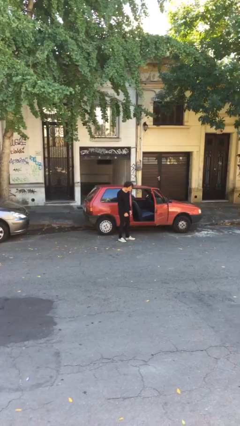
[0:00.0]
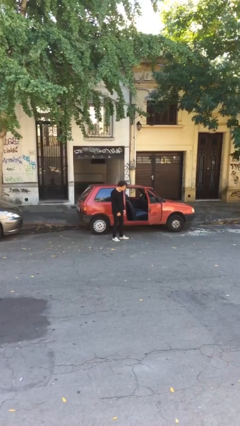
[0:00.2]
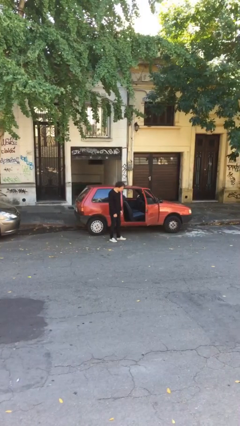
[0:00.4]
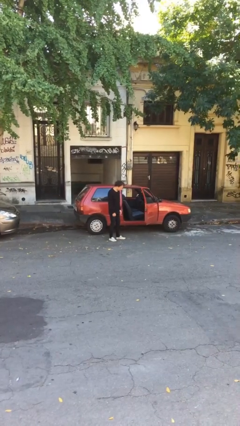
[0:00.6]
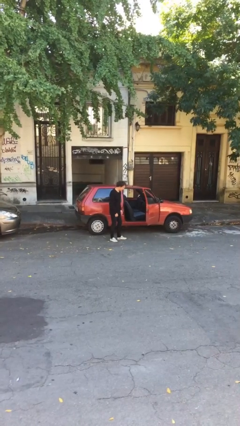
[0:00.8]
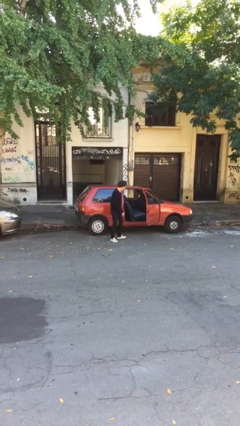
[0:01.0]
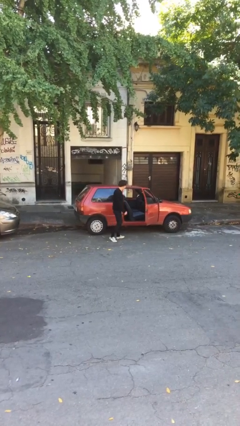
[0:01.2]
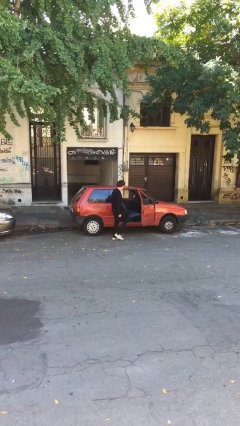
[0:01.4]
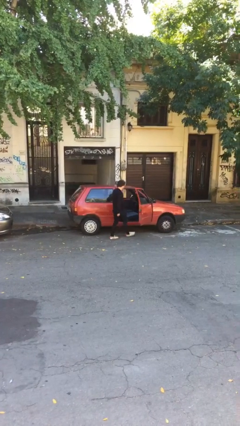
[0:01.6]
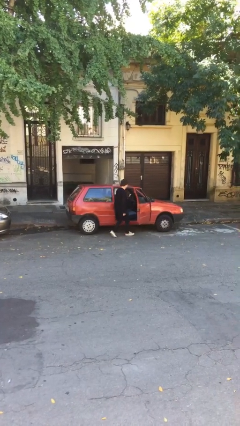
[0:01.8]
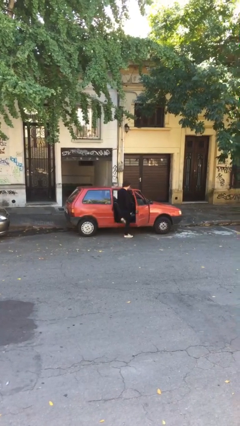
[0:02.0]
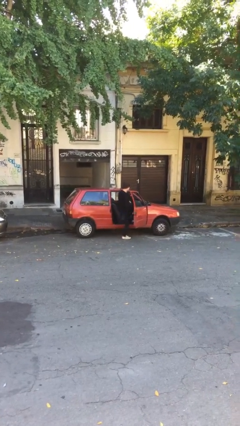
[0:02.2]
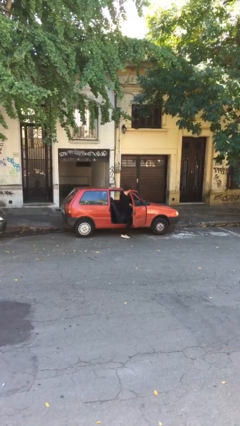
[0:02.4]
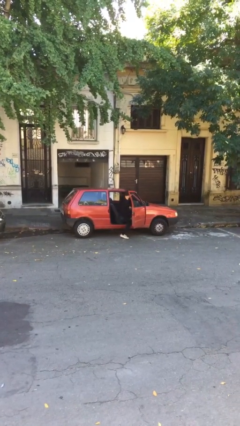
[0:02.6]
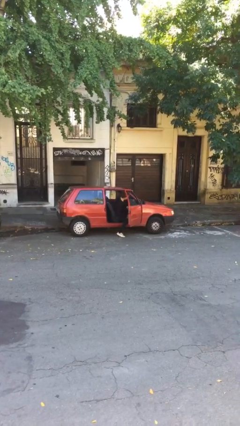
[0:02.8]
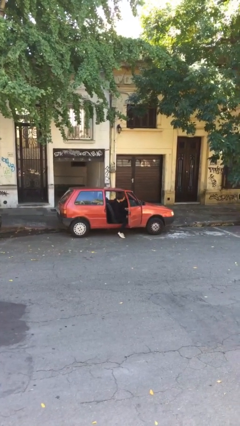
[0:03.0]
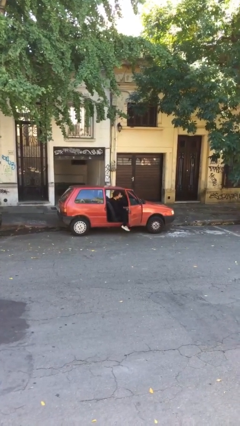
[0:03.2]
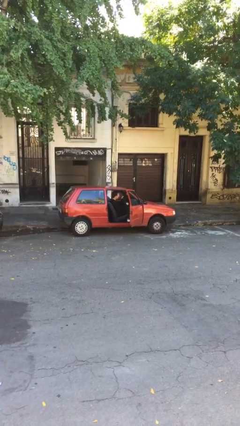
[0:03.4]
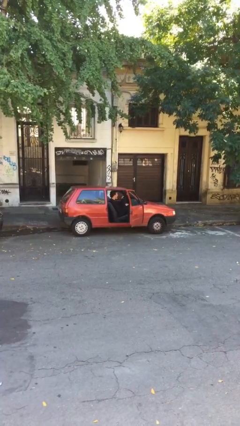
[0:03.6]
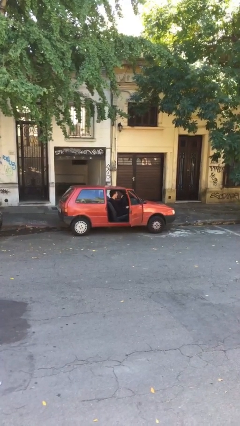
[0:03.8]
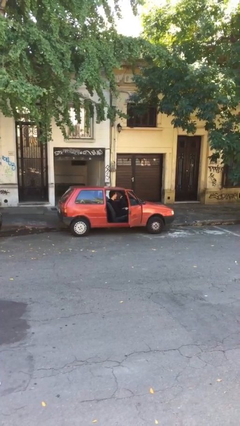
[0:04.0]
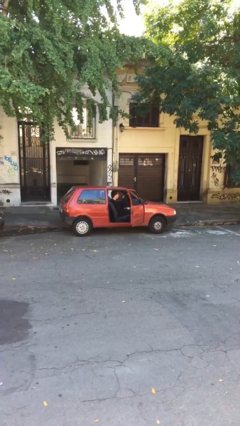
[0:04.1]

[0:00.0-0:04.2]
person enters car

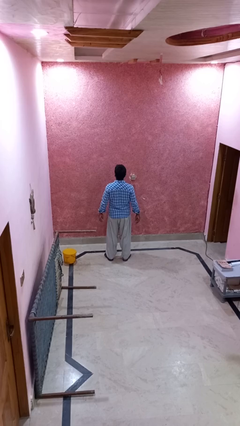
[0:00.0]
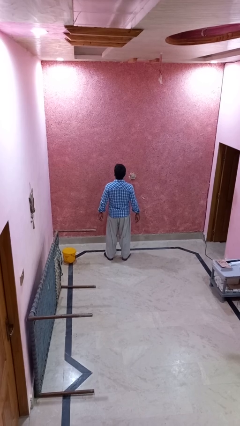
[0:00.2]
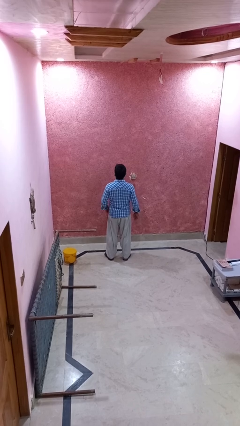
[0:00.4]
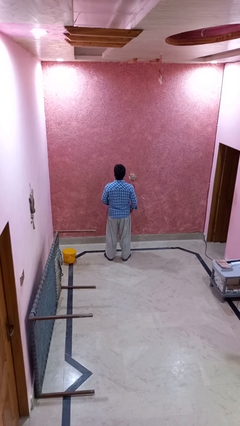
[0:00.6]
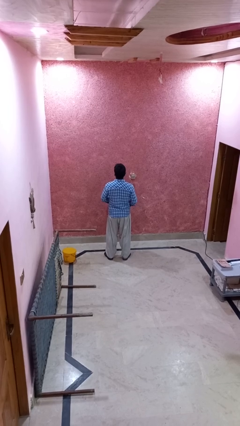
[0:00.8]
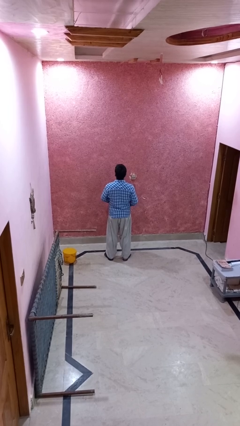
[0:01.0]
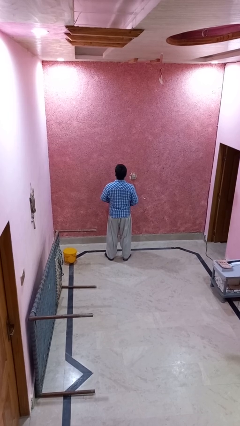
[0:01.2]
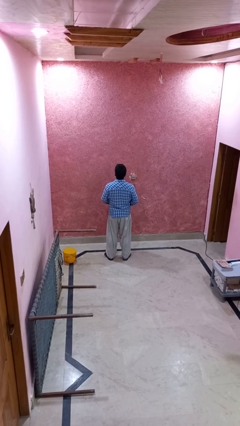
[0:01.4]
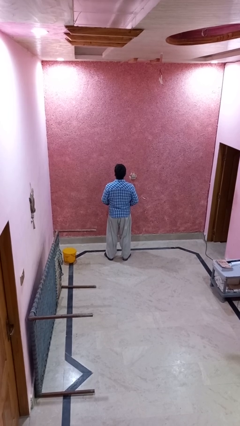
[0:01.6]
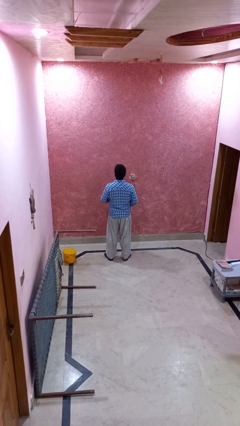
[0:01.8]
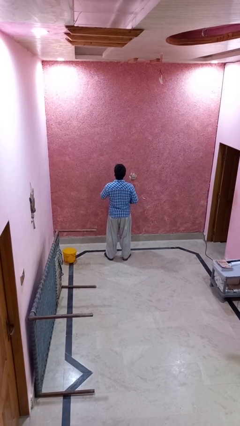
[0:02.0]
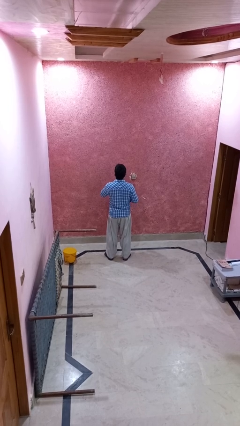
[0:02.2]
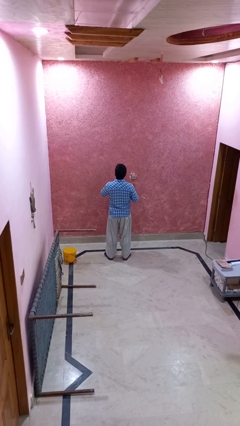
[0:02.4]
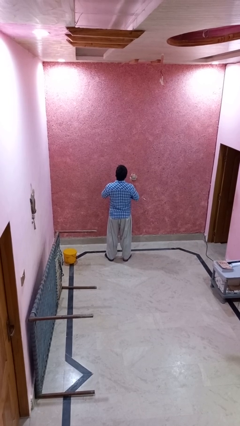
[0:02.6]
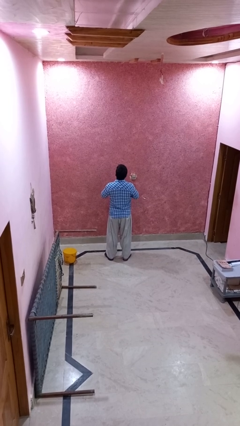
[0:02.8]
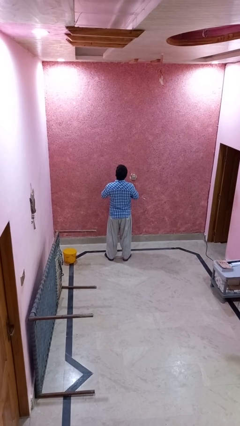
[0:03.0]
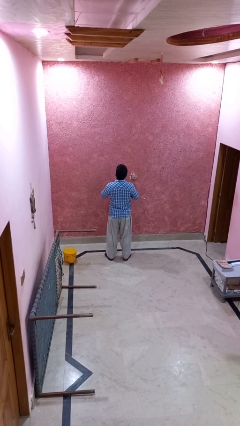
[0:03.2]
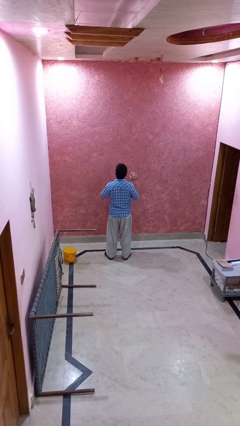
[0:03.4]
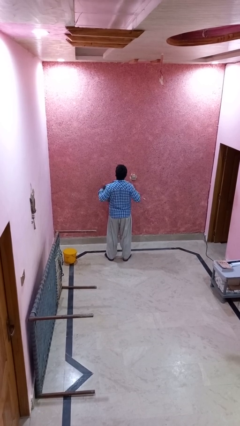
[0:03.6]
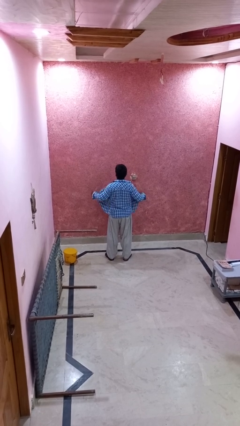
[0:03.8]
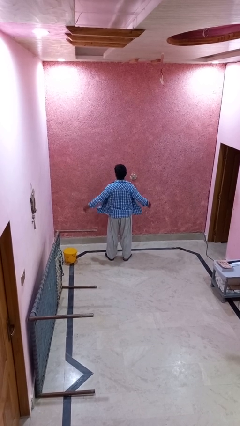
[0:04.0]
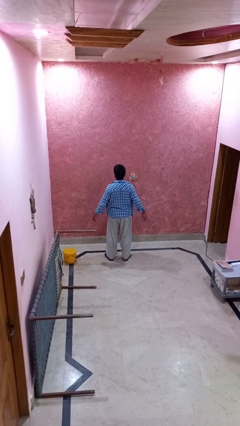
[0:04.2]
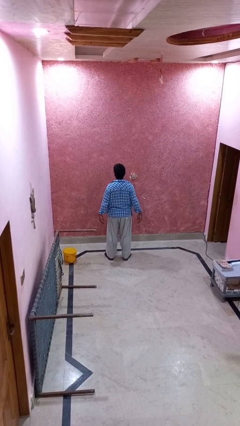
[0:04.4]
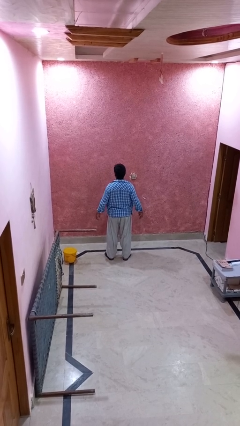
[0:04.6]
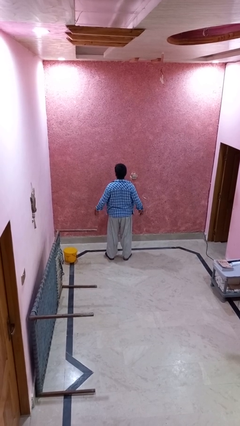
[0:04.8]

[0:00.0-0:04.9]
person unbuttons shirt

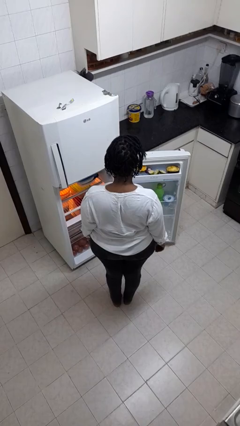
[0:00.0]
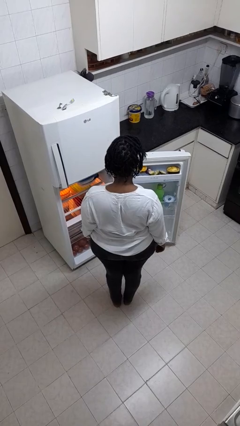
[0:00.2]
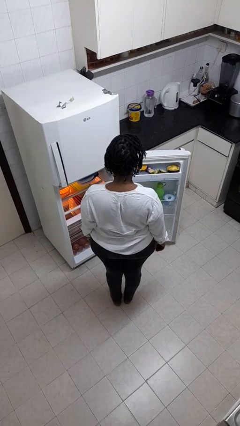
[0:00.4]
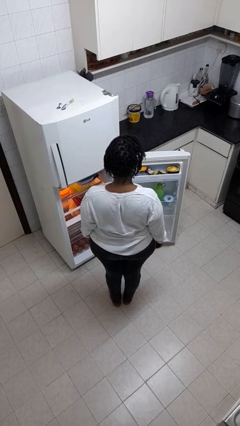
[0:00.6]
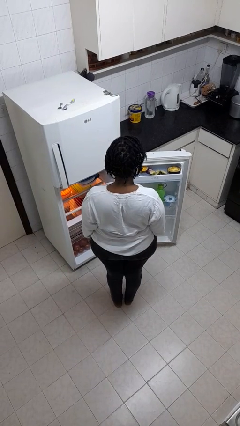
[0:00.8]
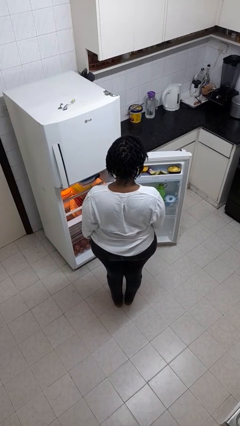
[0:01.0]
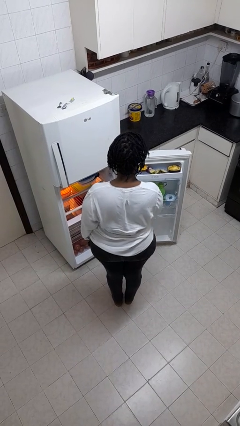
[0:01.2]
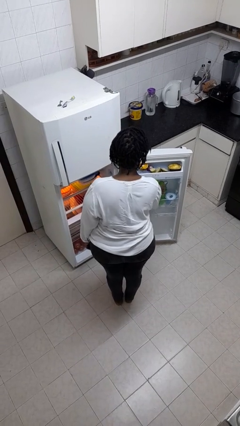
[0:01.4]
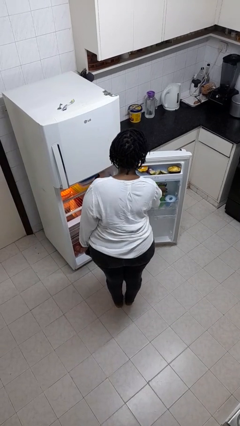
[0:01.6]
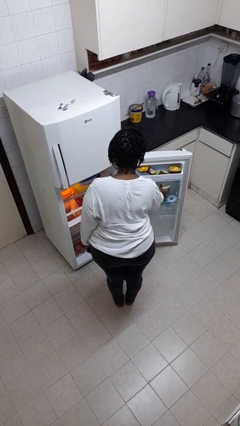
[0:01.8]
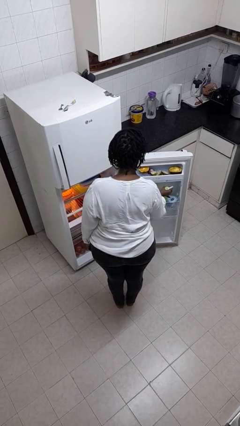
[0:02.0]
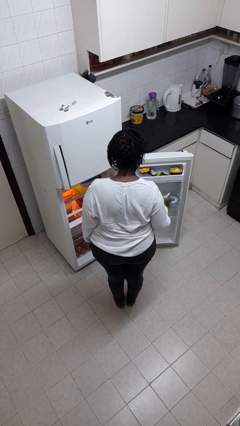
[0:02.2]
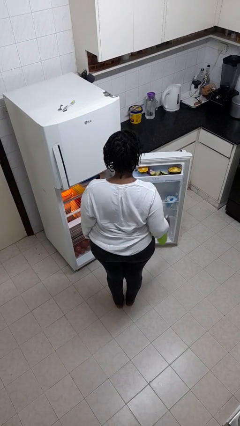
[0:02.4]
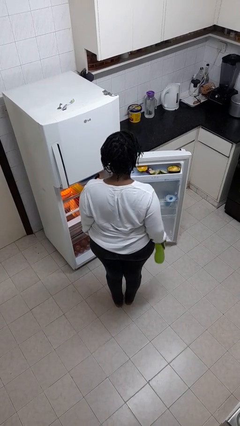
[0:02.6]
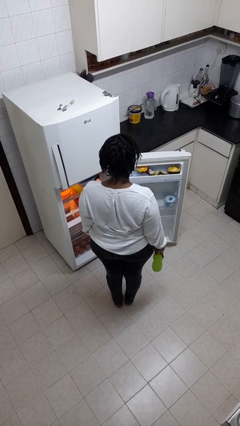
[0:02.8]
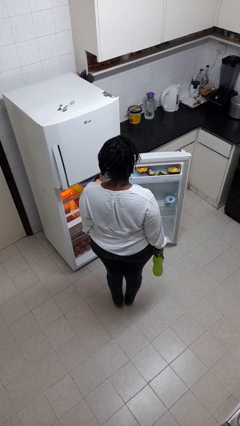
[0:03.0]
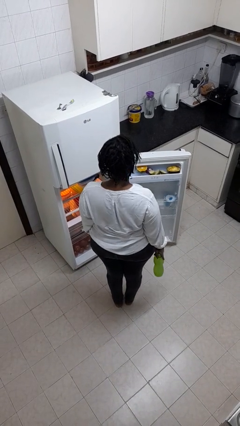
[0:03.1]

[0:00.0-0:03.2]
person takes object from refrigerator

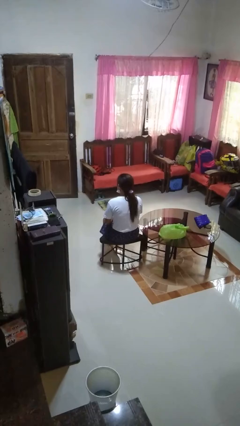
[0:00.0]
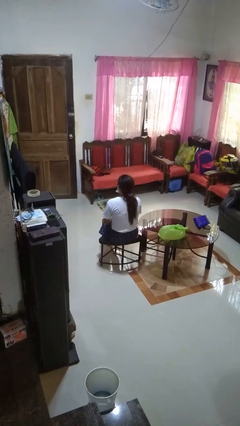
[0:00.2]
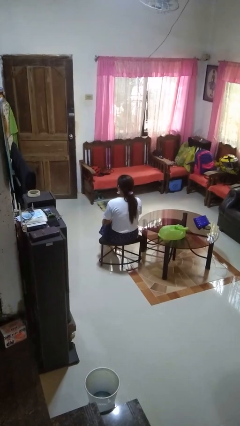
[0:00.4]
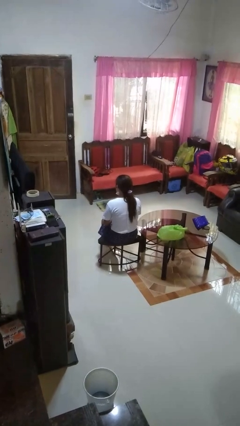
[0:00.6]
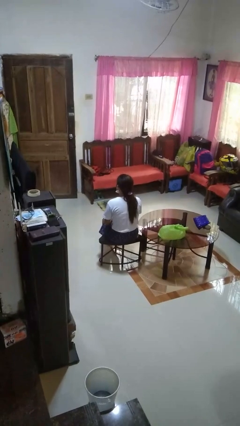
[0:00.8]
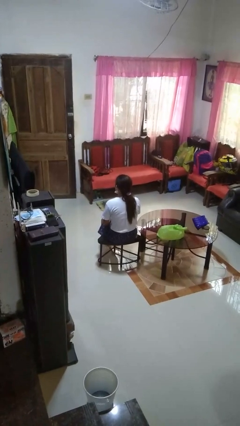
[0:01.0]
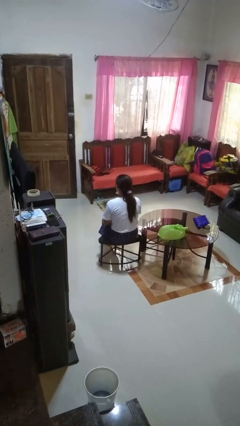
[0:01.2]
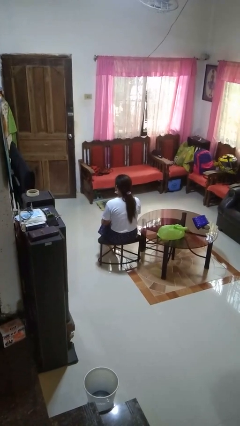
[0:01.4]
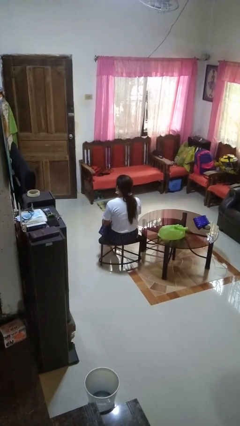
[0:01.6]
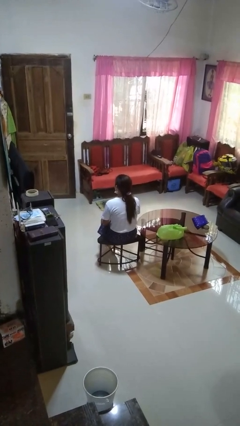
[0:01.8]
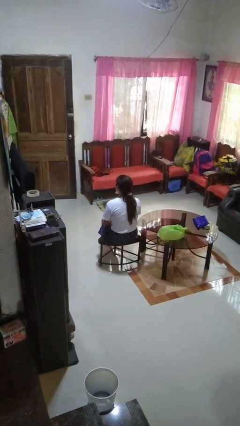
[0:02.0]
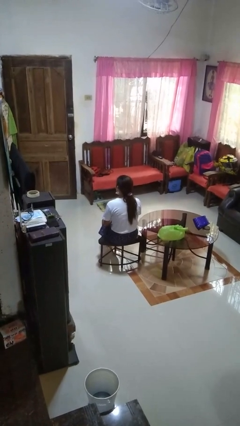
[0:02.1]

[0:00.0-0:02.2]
person nods head

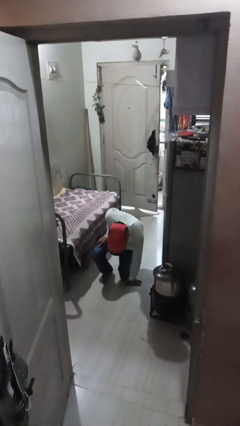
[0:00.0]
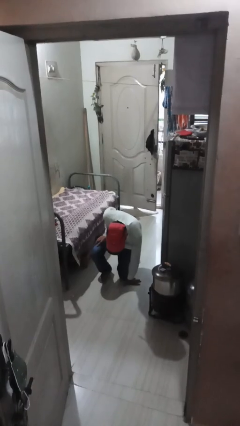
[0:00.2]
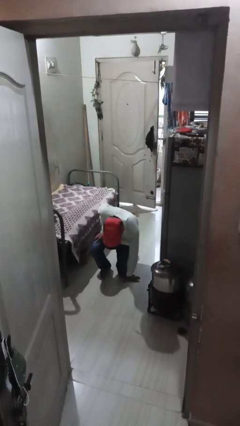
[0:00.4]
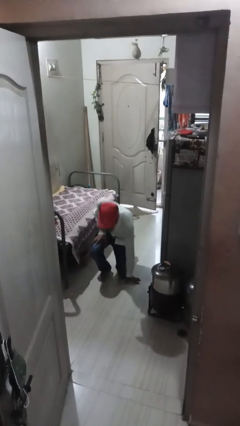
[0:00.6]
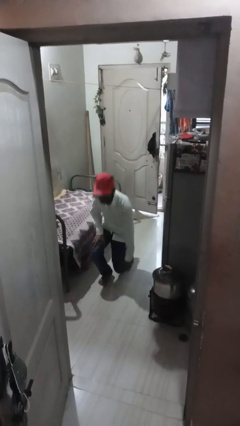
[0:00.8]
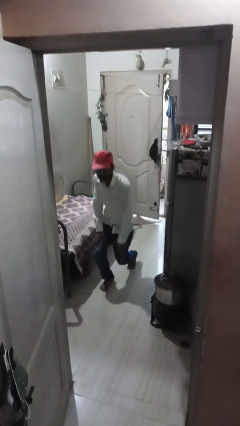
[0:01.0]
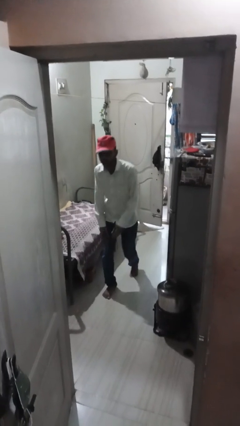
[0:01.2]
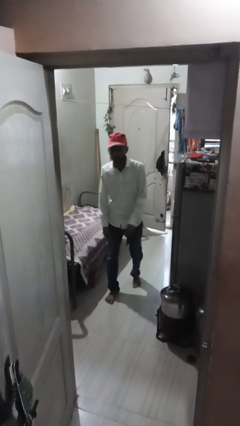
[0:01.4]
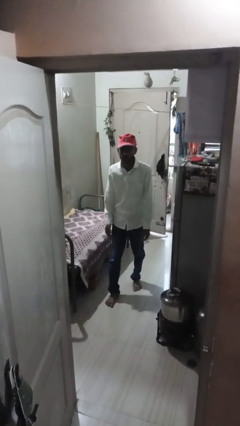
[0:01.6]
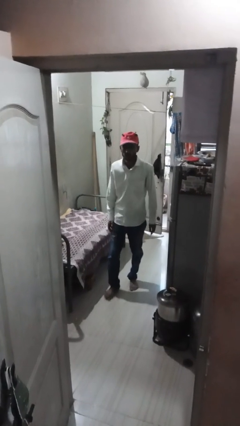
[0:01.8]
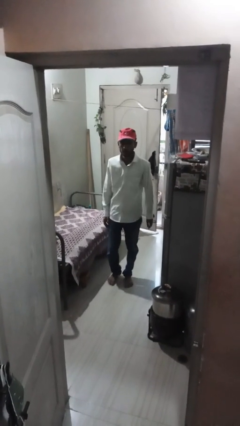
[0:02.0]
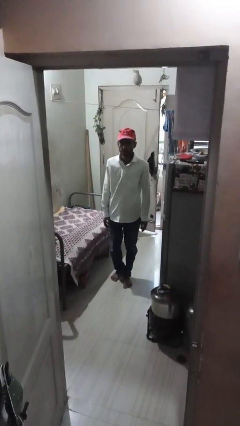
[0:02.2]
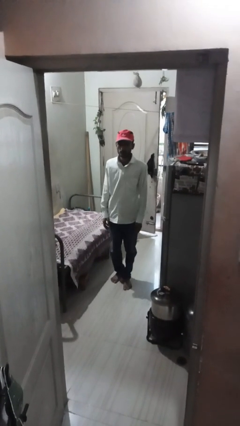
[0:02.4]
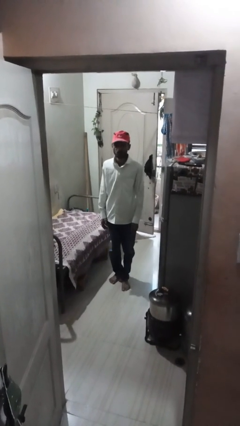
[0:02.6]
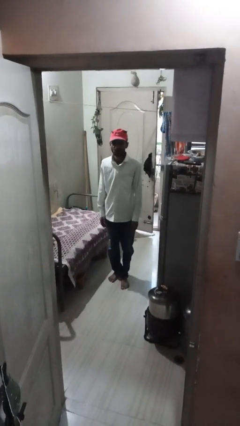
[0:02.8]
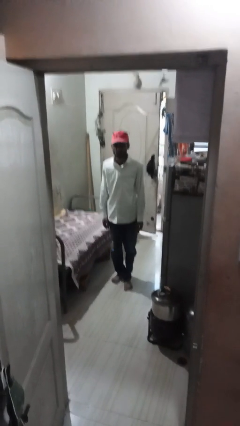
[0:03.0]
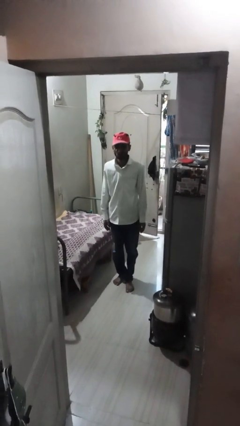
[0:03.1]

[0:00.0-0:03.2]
person stands up from floor

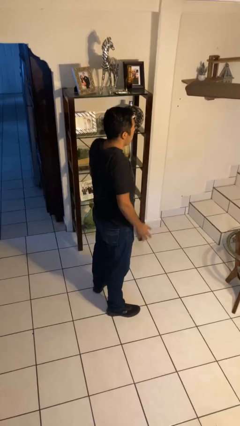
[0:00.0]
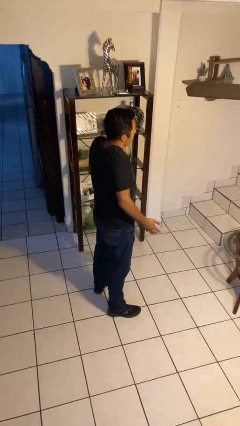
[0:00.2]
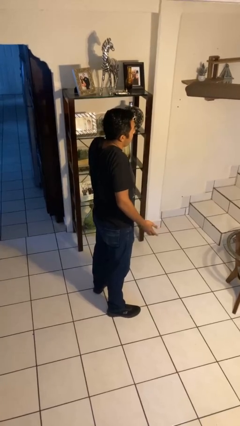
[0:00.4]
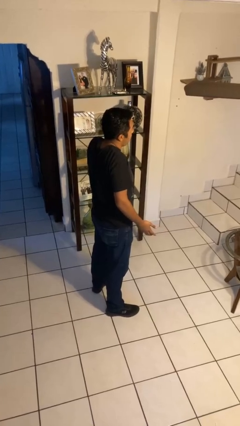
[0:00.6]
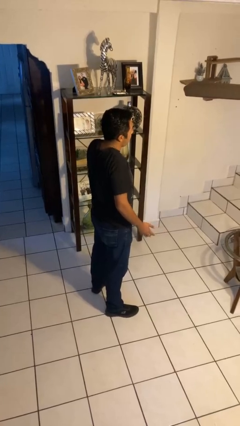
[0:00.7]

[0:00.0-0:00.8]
person shrugs
